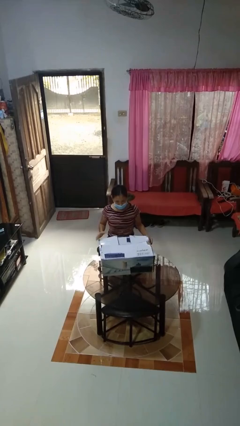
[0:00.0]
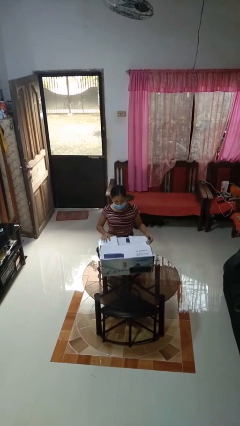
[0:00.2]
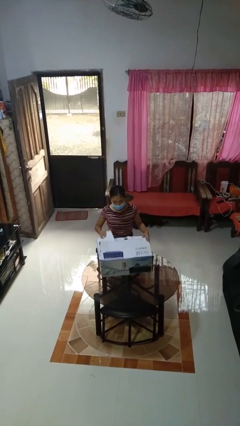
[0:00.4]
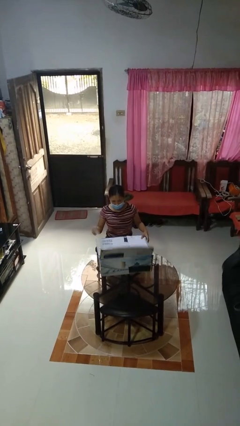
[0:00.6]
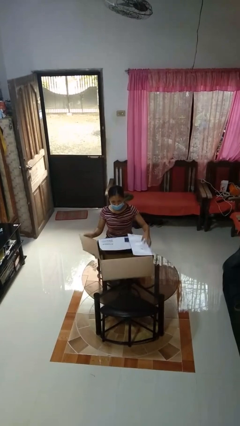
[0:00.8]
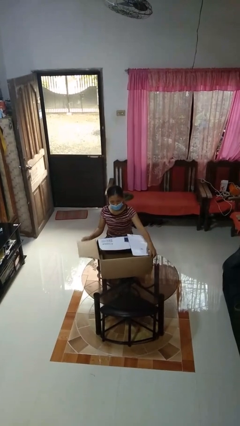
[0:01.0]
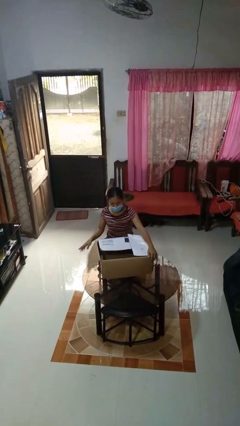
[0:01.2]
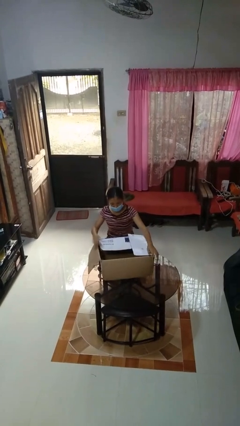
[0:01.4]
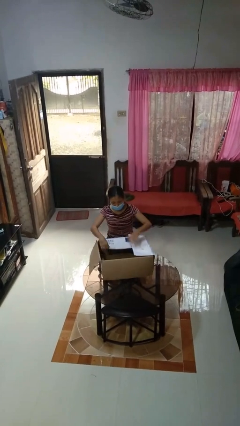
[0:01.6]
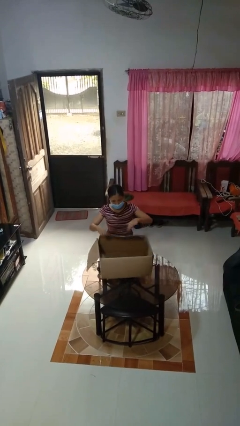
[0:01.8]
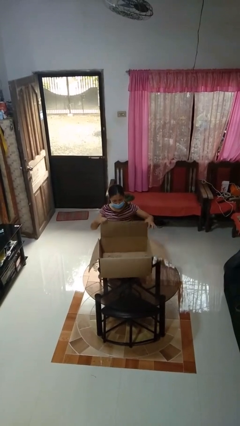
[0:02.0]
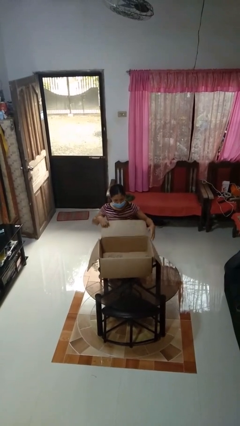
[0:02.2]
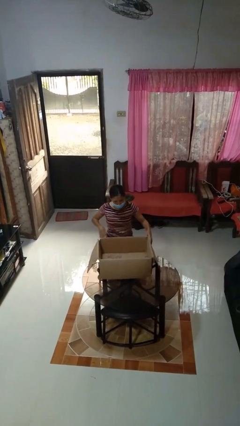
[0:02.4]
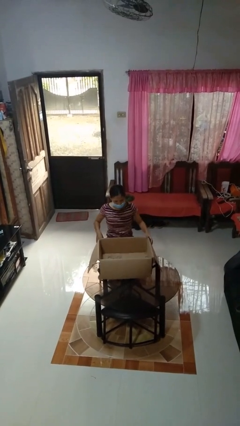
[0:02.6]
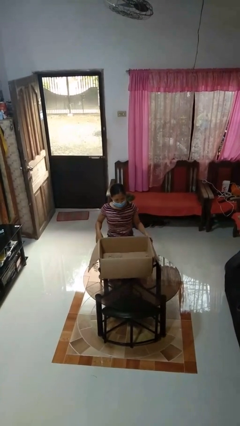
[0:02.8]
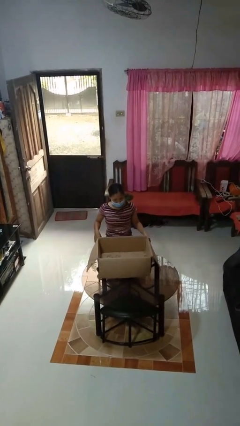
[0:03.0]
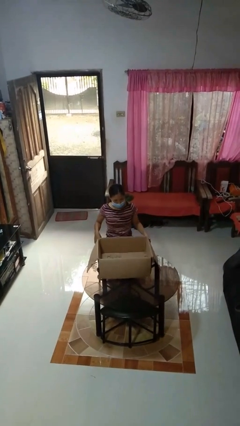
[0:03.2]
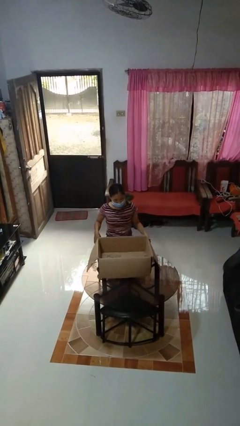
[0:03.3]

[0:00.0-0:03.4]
person opens box

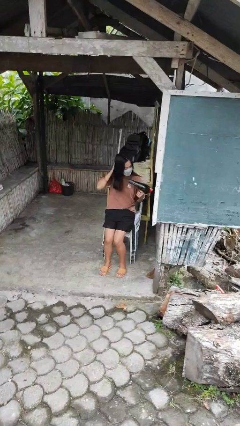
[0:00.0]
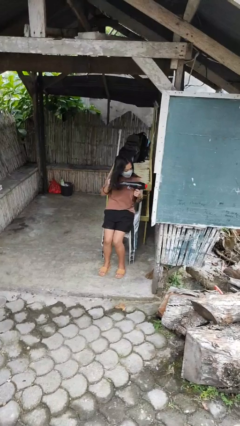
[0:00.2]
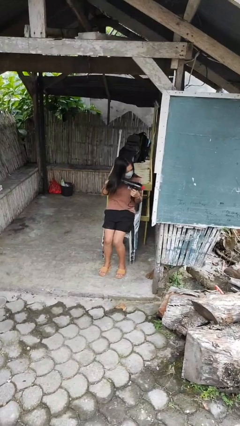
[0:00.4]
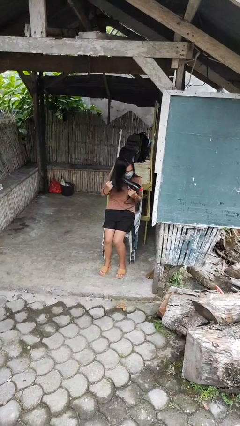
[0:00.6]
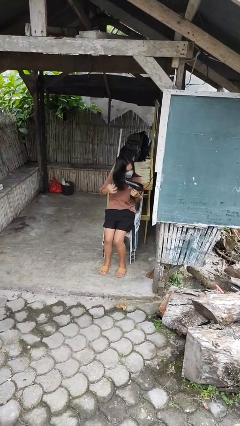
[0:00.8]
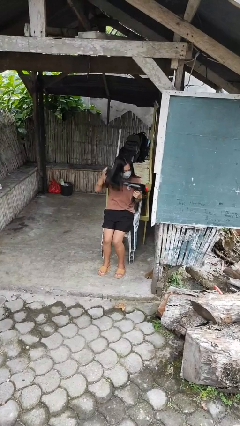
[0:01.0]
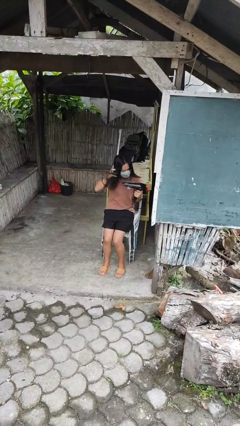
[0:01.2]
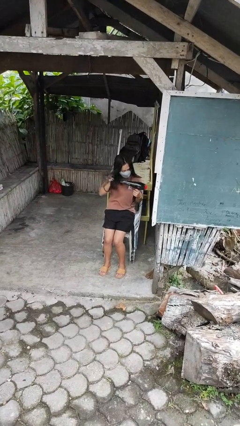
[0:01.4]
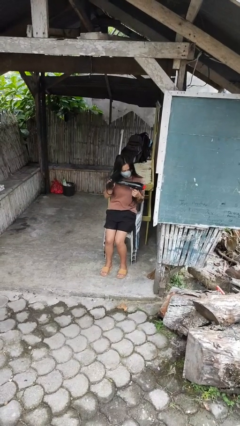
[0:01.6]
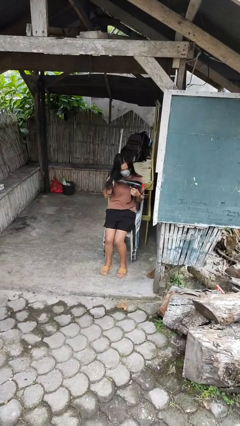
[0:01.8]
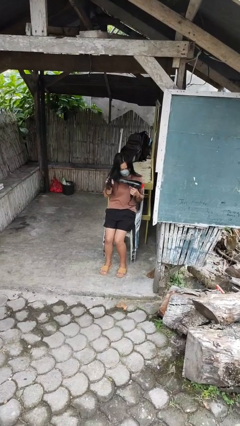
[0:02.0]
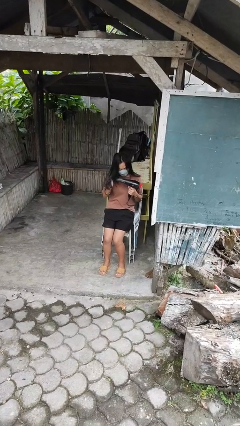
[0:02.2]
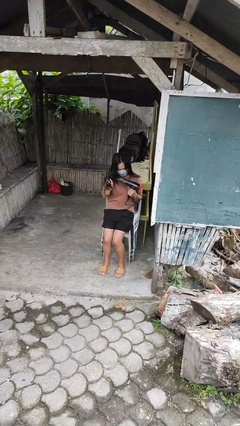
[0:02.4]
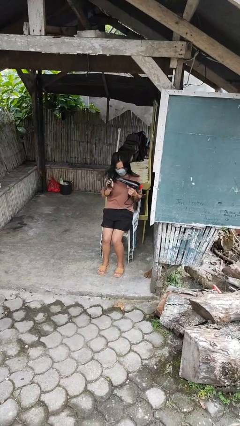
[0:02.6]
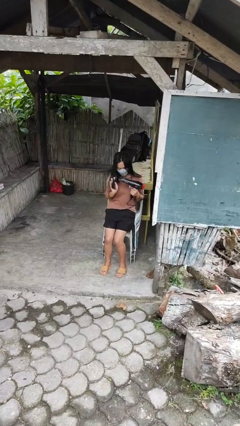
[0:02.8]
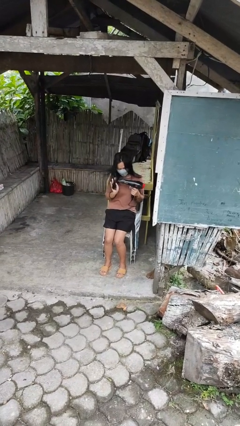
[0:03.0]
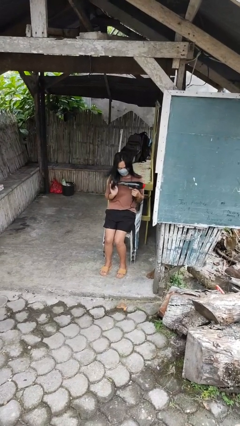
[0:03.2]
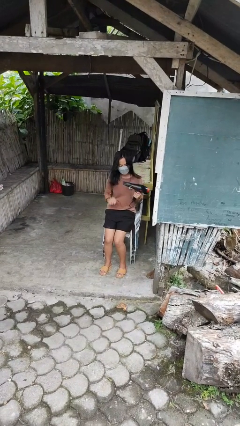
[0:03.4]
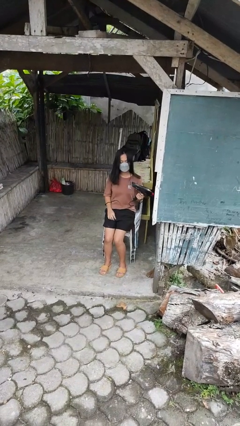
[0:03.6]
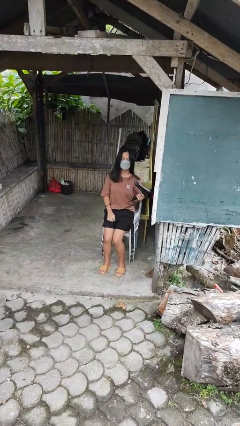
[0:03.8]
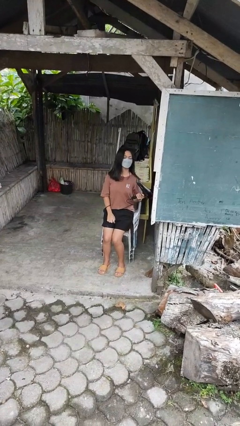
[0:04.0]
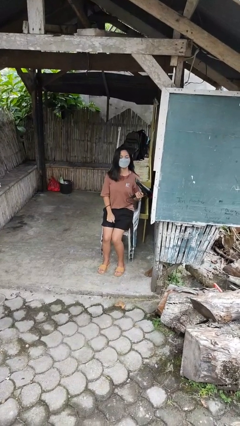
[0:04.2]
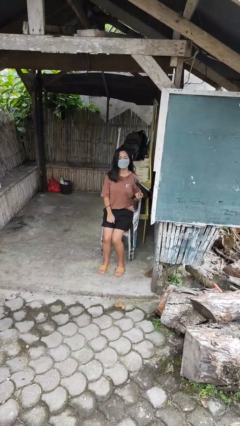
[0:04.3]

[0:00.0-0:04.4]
person dries hair with hairdryer

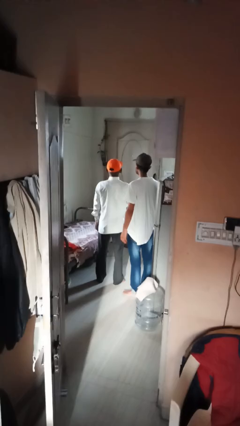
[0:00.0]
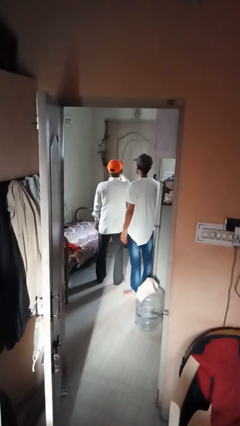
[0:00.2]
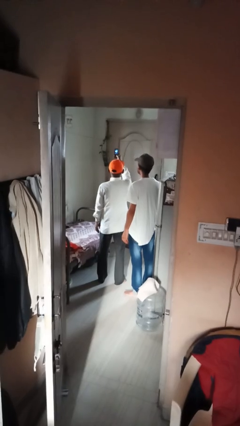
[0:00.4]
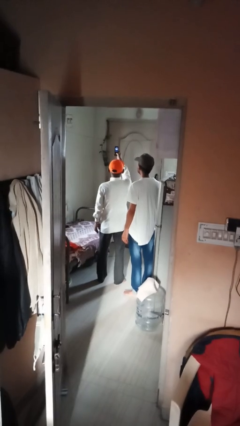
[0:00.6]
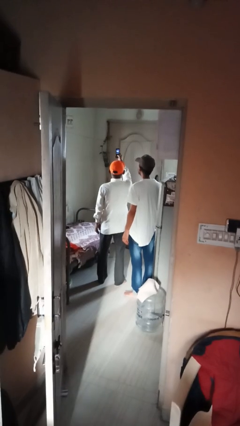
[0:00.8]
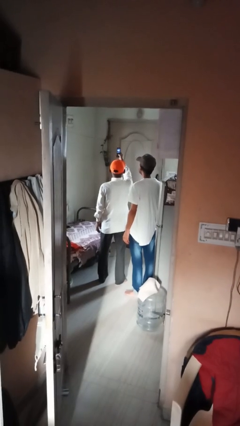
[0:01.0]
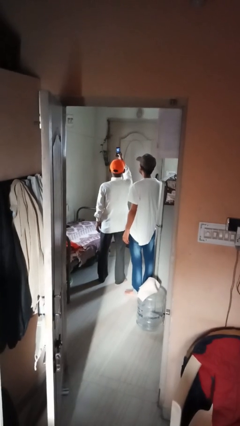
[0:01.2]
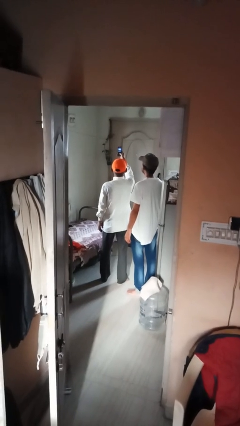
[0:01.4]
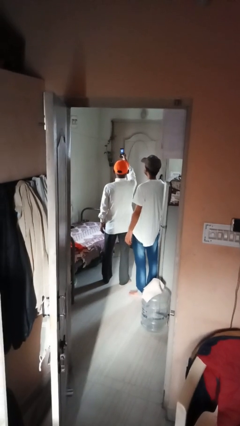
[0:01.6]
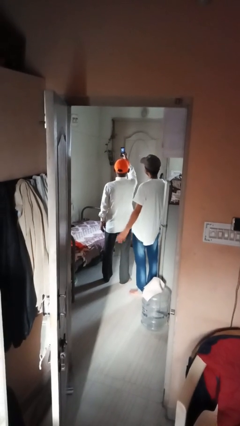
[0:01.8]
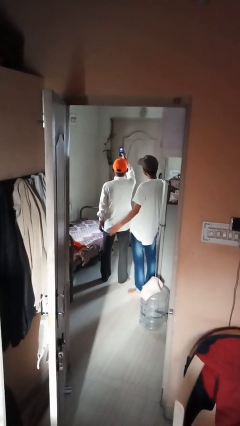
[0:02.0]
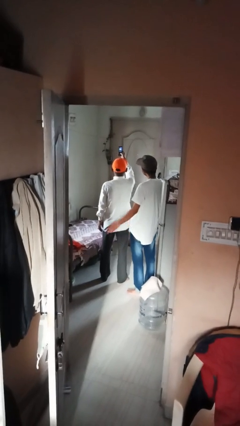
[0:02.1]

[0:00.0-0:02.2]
person takes selfie with person

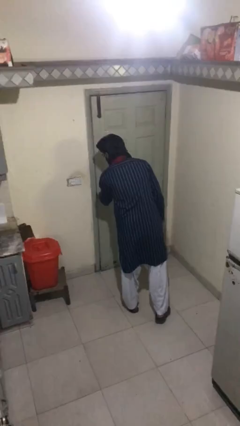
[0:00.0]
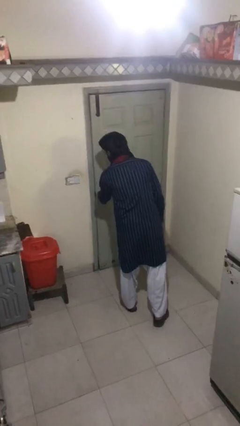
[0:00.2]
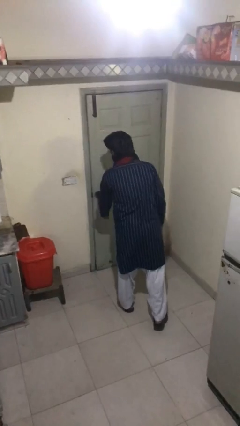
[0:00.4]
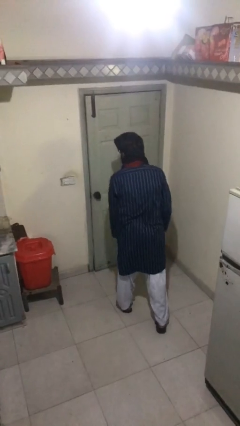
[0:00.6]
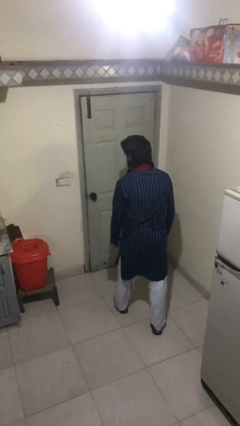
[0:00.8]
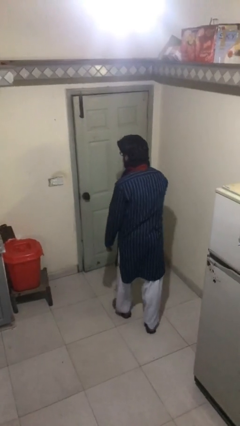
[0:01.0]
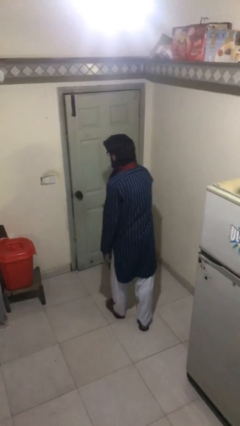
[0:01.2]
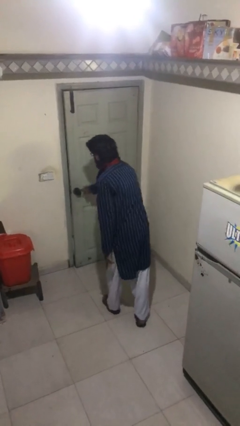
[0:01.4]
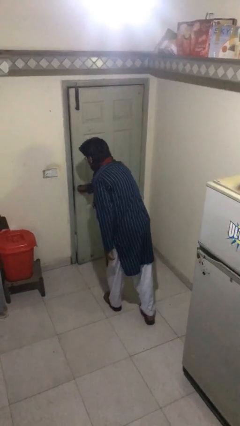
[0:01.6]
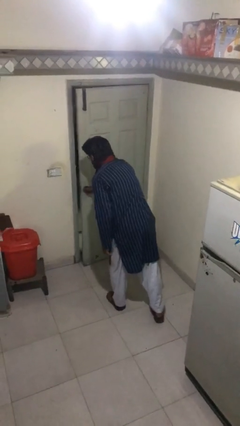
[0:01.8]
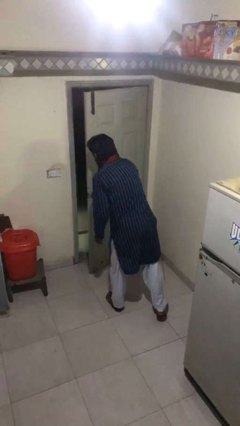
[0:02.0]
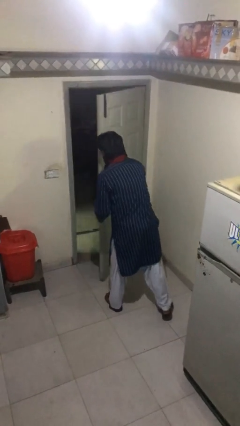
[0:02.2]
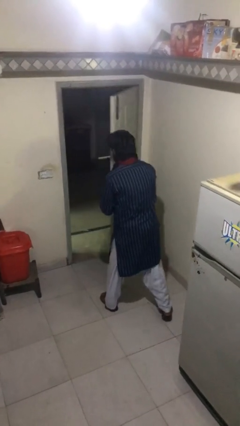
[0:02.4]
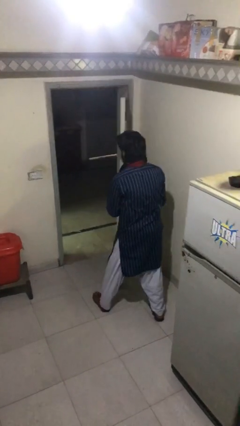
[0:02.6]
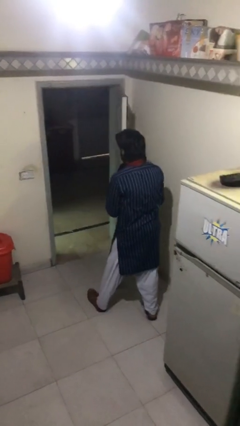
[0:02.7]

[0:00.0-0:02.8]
person opens facility door

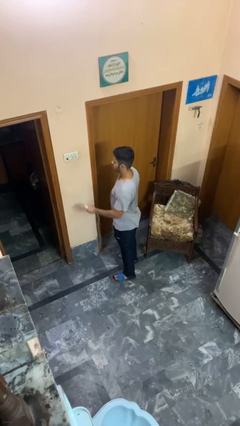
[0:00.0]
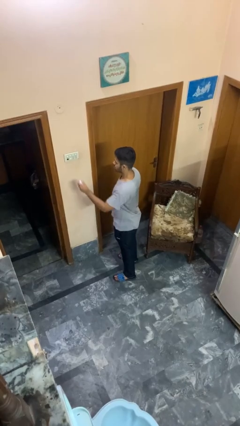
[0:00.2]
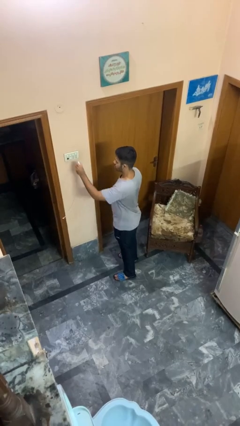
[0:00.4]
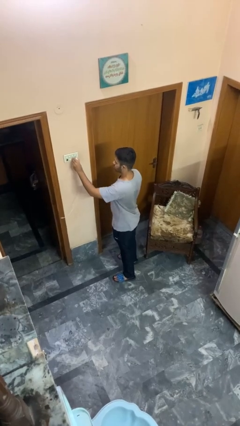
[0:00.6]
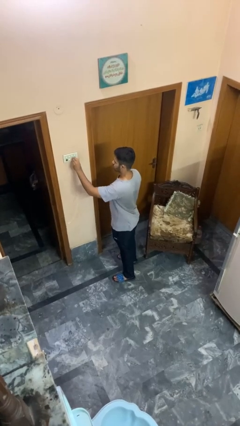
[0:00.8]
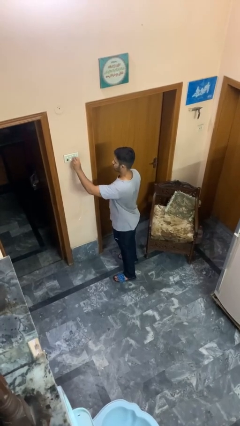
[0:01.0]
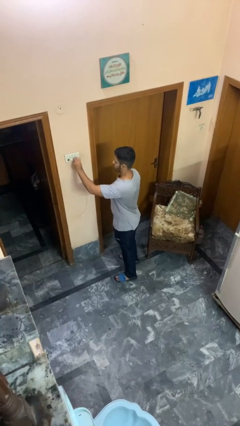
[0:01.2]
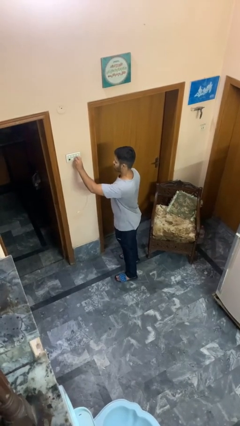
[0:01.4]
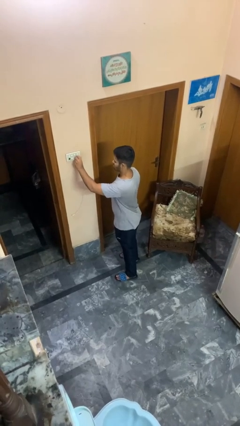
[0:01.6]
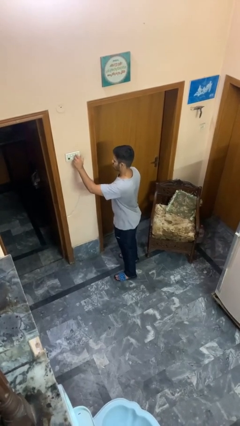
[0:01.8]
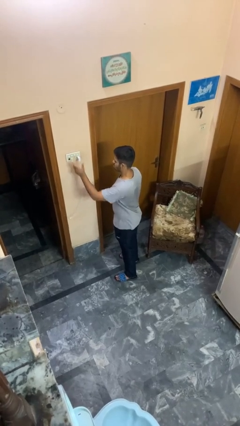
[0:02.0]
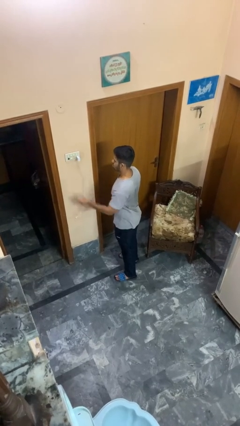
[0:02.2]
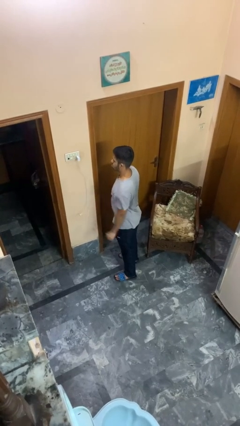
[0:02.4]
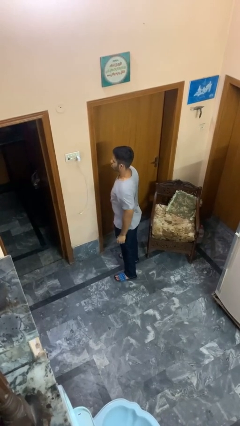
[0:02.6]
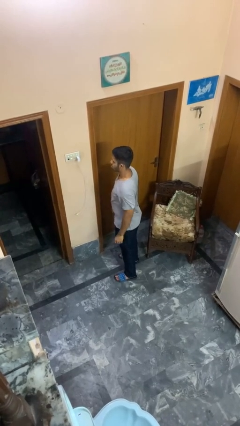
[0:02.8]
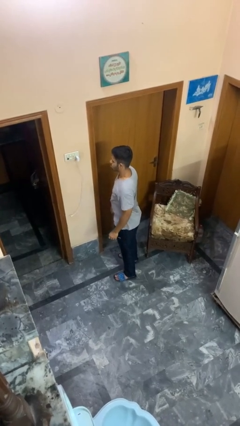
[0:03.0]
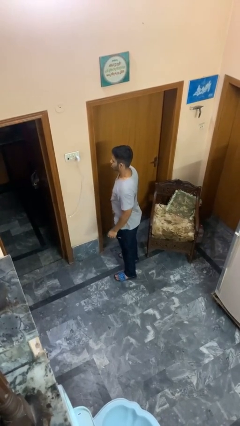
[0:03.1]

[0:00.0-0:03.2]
person plugs into electrical socket

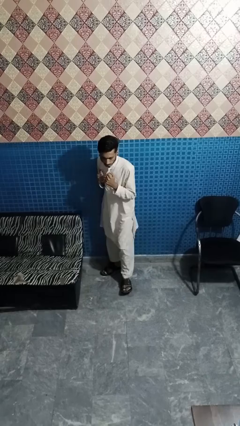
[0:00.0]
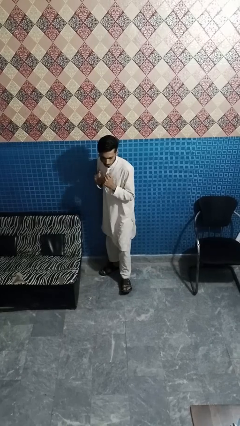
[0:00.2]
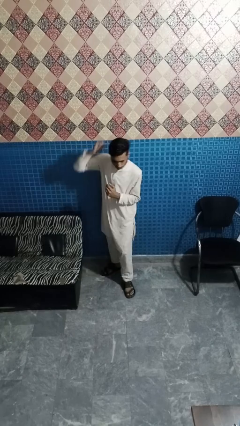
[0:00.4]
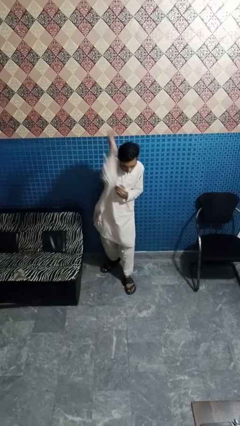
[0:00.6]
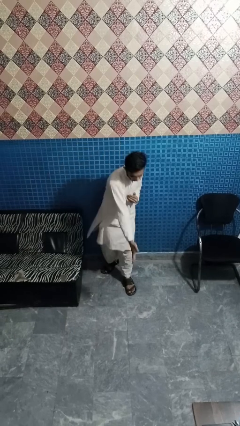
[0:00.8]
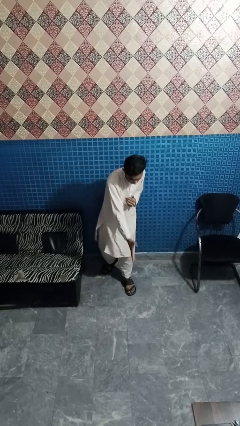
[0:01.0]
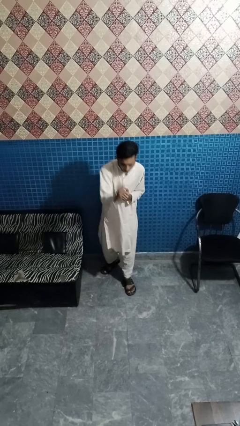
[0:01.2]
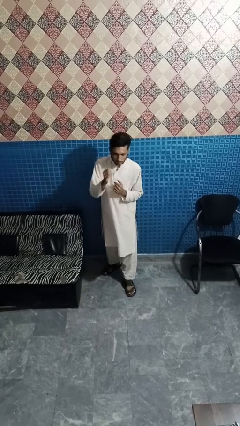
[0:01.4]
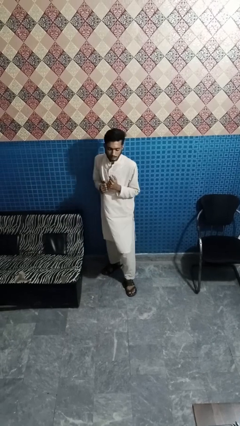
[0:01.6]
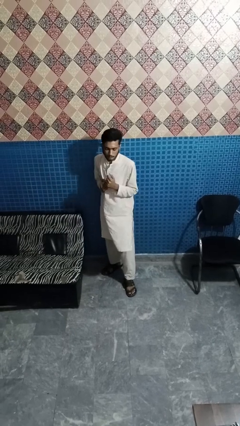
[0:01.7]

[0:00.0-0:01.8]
person karate chop
